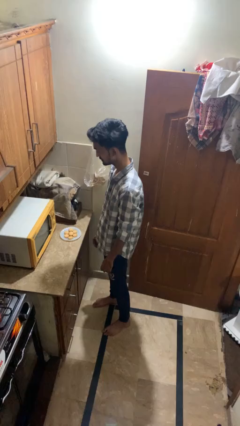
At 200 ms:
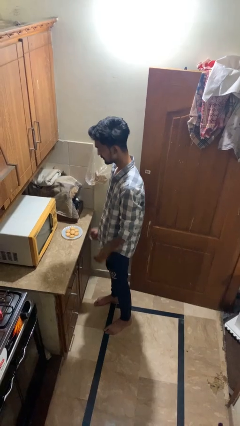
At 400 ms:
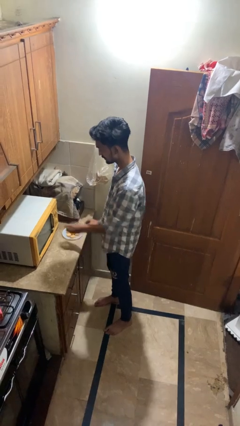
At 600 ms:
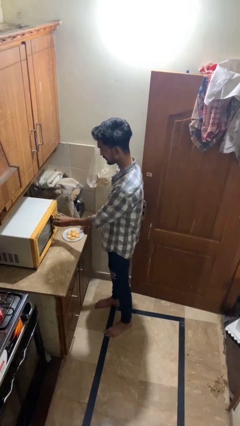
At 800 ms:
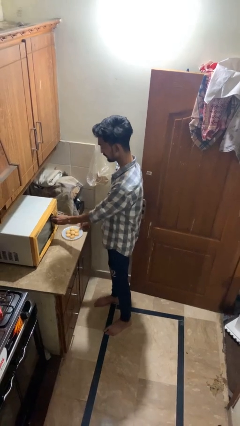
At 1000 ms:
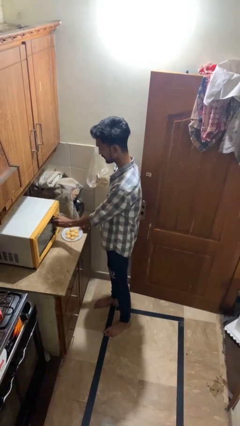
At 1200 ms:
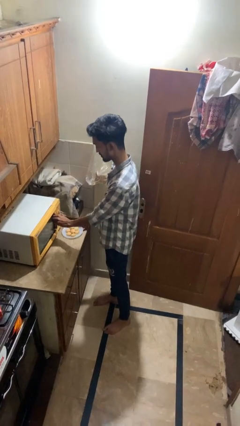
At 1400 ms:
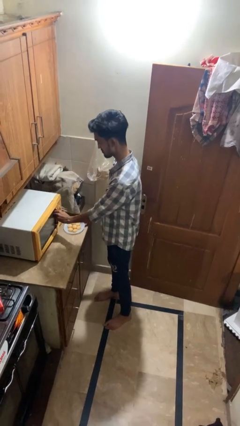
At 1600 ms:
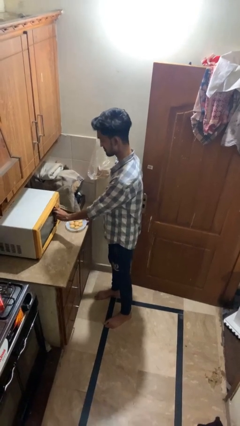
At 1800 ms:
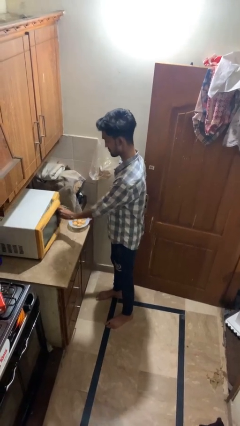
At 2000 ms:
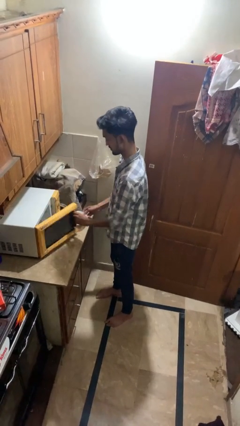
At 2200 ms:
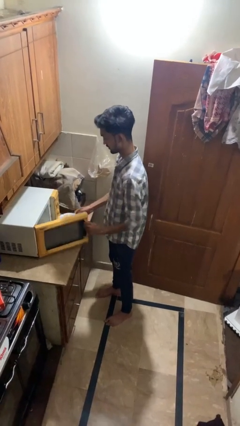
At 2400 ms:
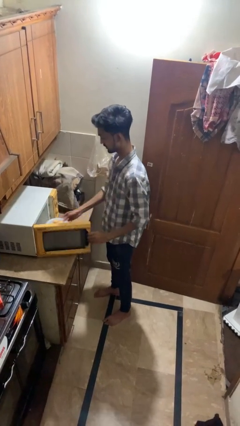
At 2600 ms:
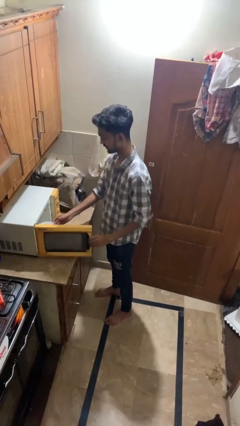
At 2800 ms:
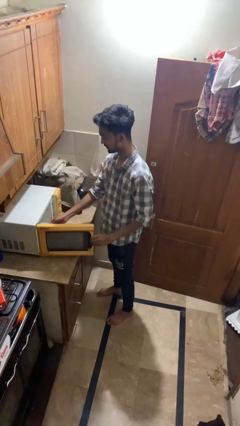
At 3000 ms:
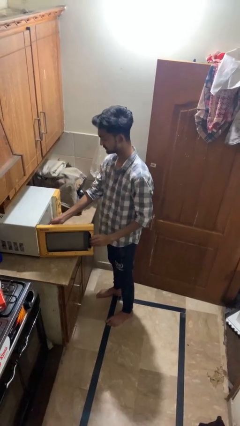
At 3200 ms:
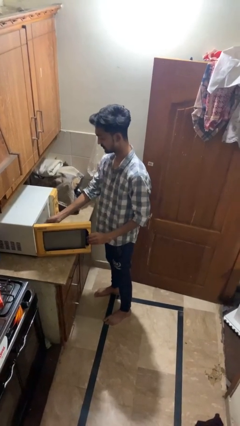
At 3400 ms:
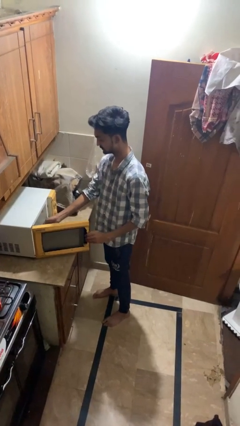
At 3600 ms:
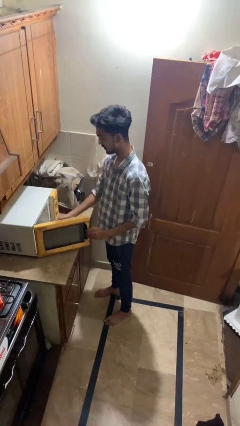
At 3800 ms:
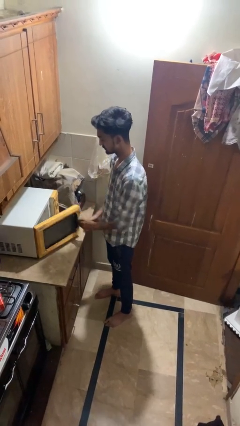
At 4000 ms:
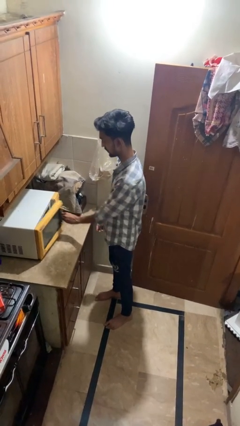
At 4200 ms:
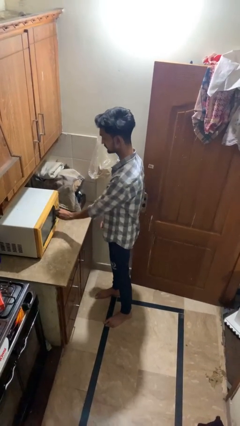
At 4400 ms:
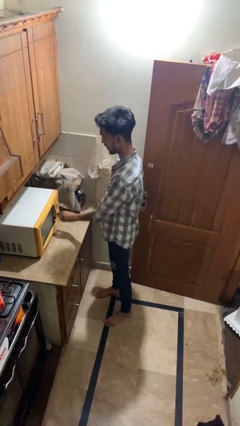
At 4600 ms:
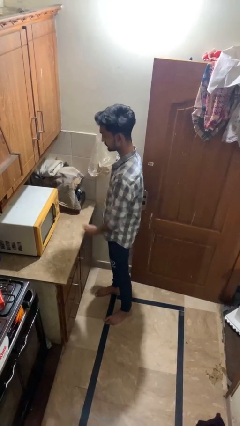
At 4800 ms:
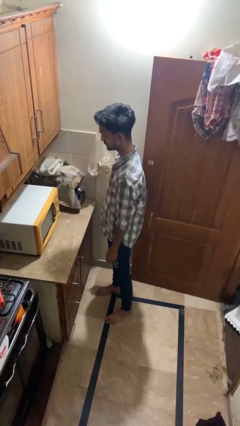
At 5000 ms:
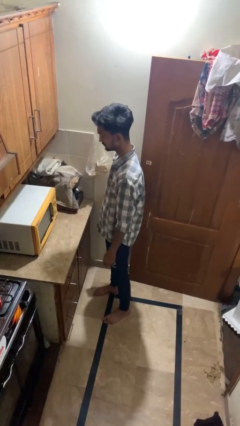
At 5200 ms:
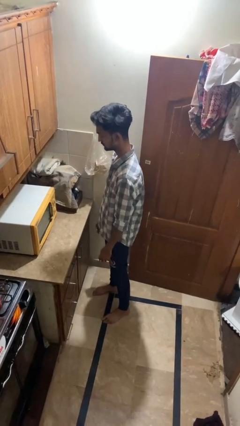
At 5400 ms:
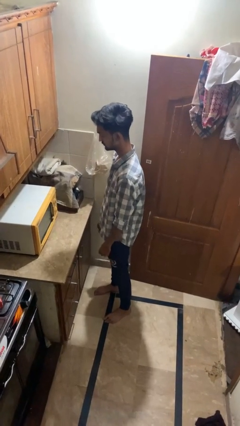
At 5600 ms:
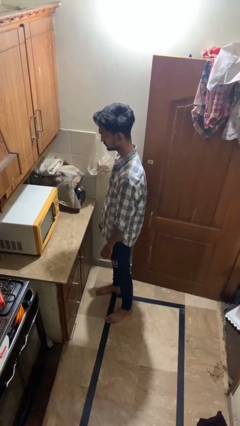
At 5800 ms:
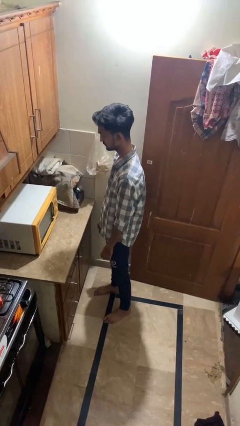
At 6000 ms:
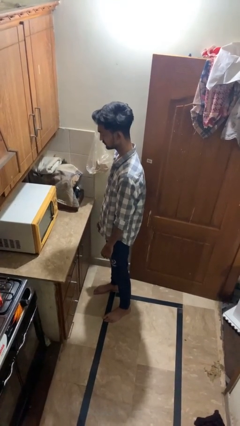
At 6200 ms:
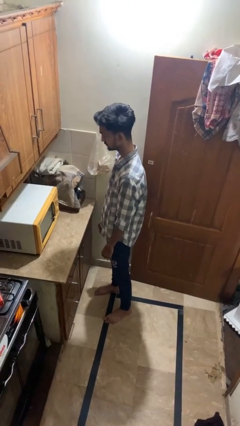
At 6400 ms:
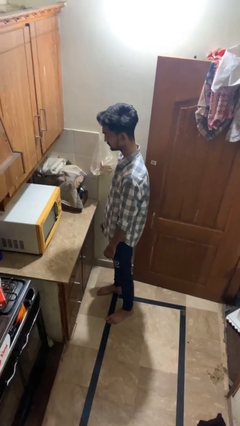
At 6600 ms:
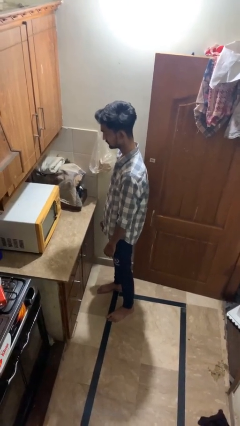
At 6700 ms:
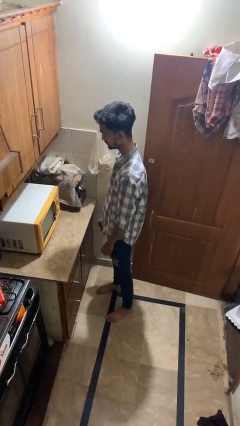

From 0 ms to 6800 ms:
person puts object into microwave

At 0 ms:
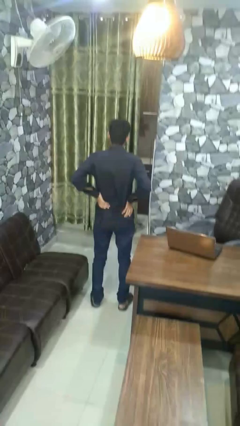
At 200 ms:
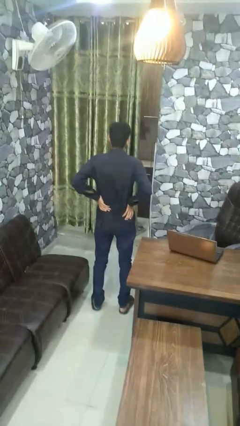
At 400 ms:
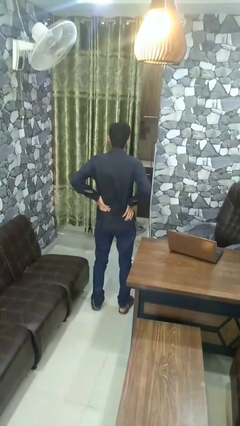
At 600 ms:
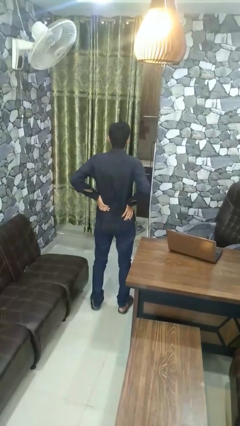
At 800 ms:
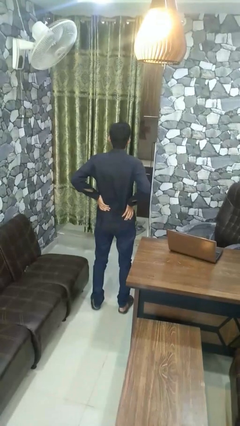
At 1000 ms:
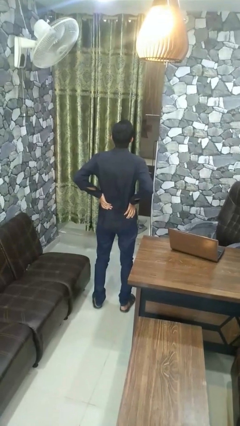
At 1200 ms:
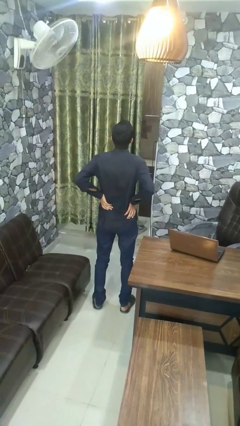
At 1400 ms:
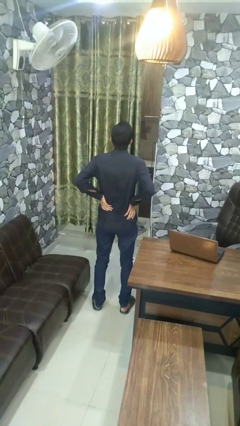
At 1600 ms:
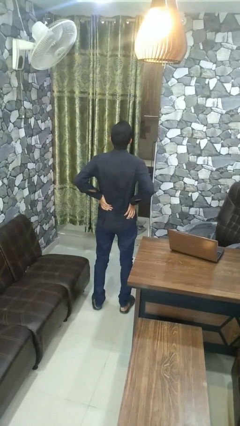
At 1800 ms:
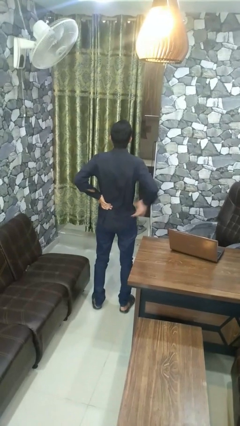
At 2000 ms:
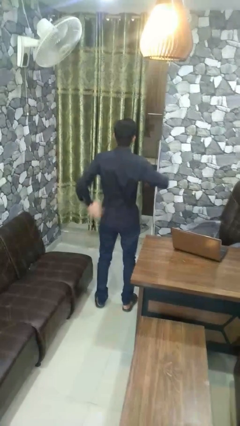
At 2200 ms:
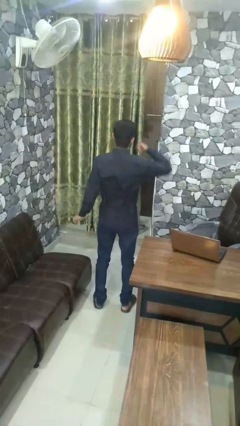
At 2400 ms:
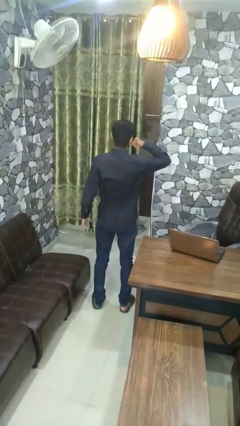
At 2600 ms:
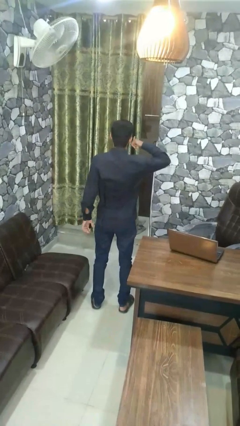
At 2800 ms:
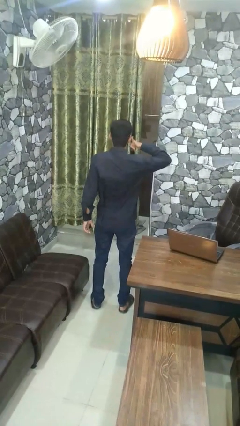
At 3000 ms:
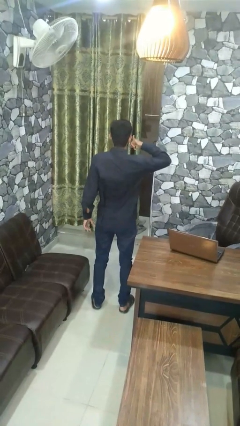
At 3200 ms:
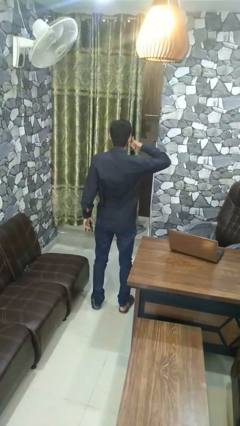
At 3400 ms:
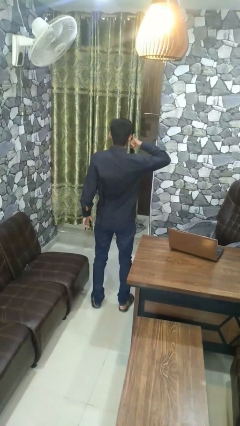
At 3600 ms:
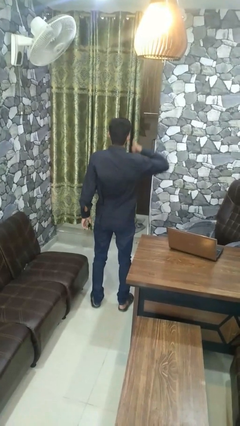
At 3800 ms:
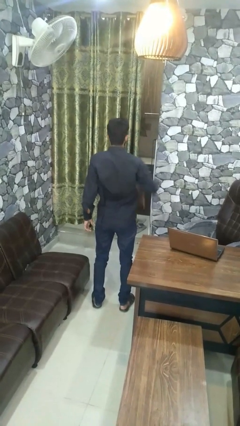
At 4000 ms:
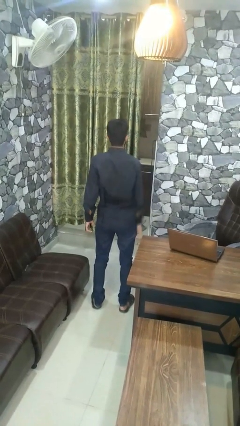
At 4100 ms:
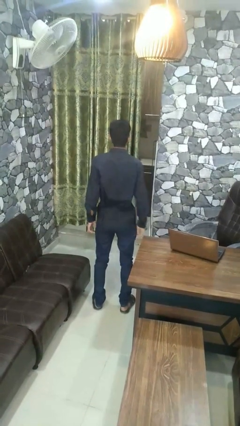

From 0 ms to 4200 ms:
person gestures call me

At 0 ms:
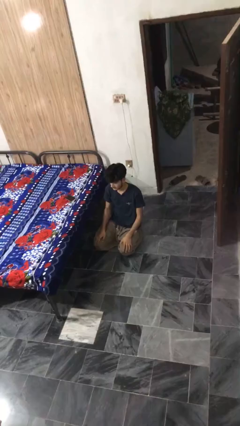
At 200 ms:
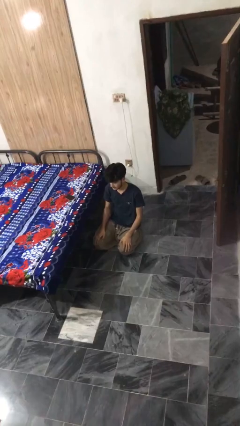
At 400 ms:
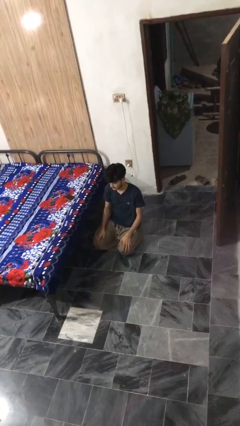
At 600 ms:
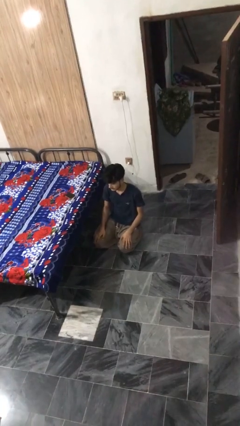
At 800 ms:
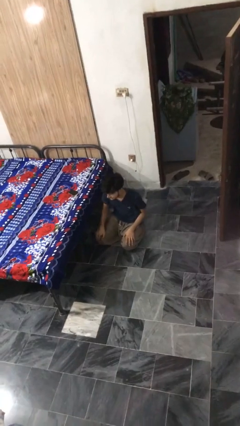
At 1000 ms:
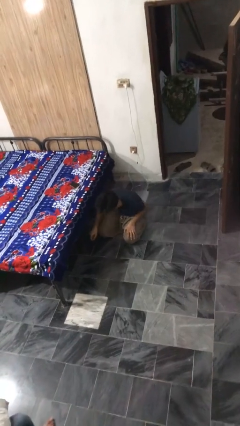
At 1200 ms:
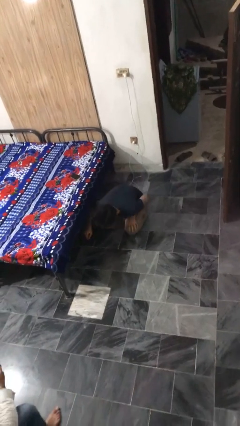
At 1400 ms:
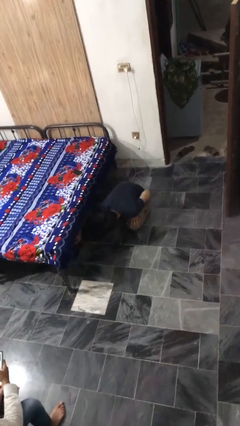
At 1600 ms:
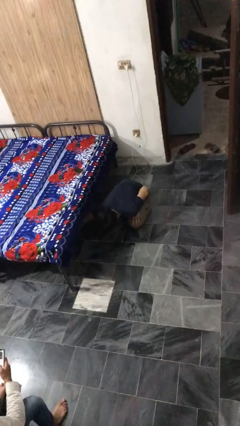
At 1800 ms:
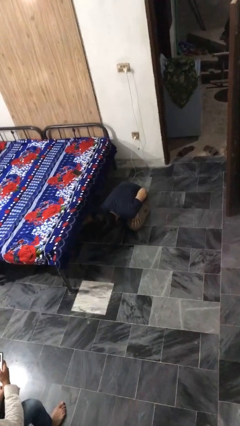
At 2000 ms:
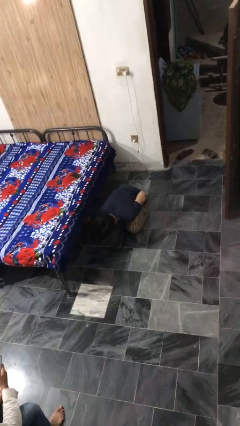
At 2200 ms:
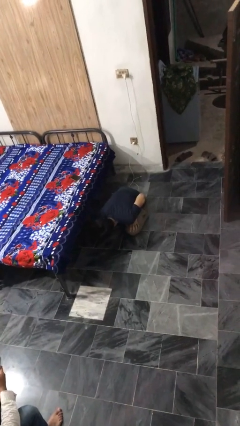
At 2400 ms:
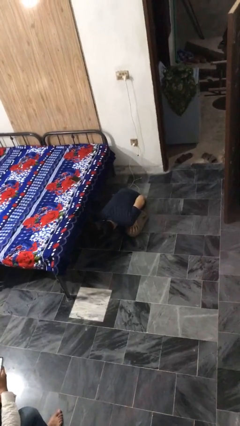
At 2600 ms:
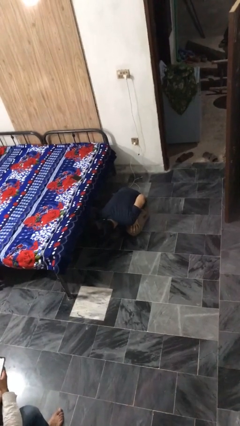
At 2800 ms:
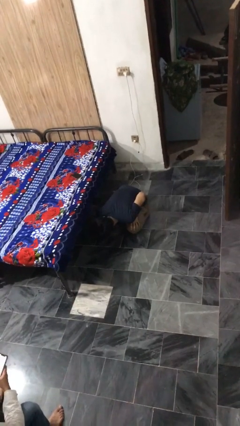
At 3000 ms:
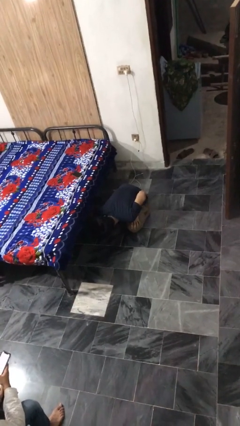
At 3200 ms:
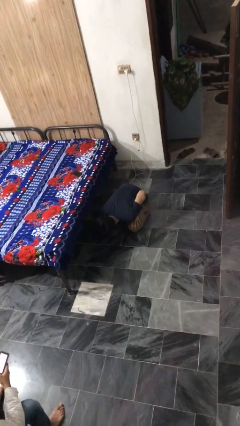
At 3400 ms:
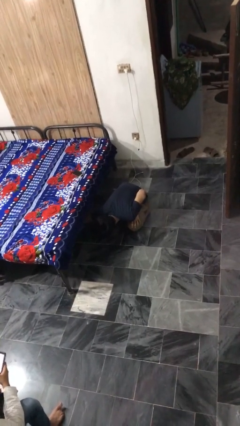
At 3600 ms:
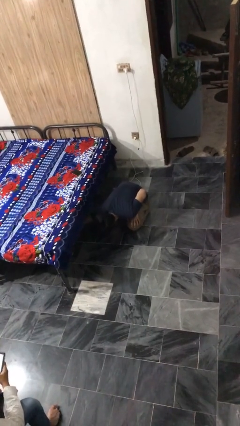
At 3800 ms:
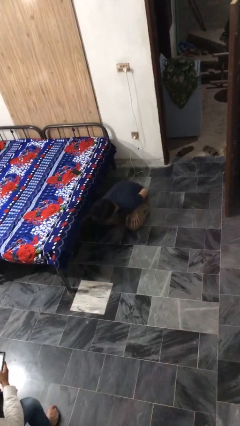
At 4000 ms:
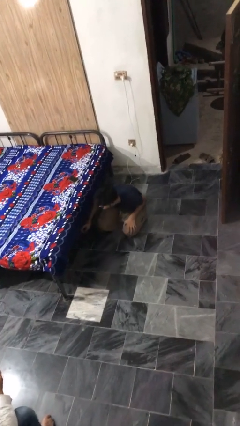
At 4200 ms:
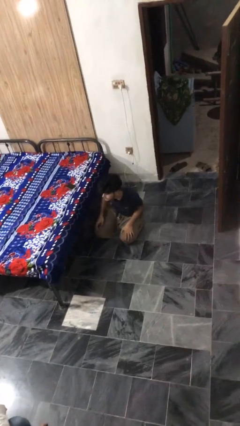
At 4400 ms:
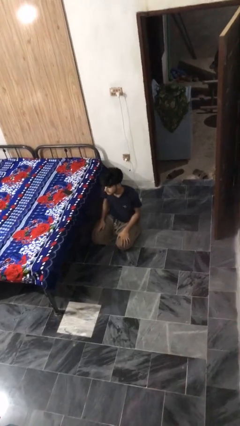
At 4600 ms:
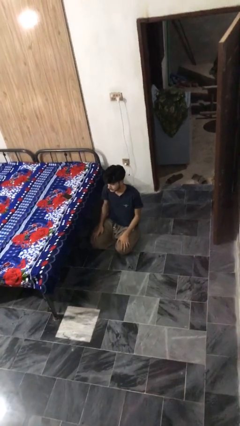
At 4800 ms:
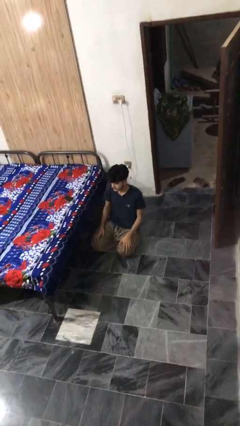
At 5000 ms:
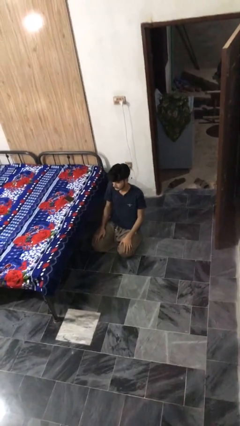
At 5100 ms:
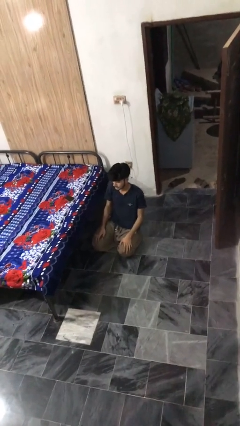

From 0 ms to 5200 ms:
person searches under bed

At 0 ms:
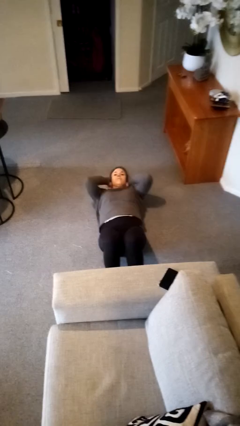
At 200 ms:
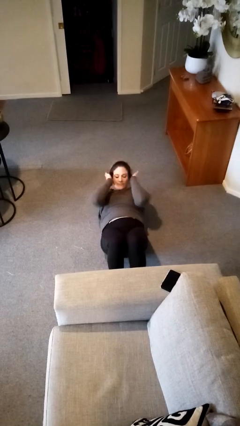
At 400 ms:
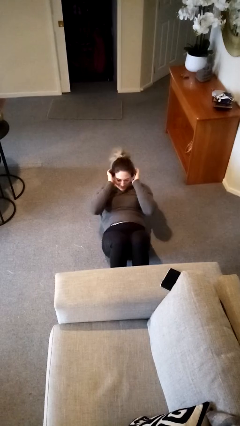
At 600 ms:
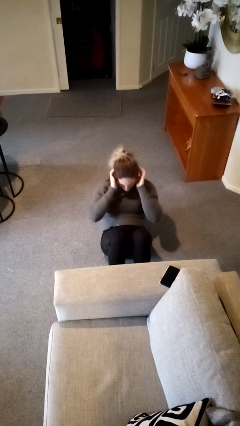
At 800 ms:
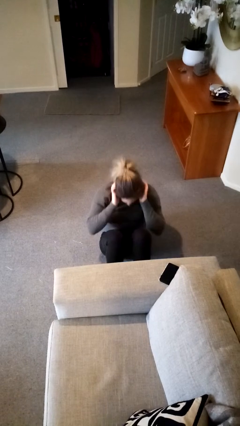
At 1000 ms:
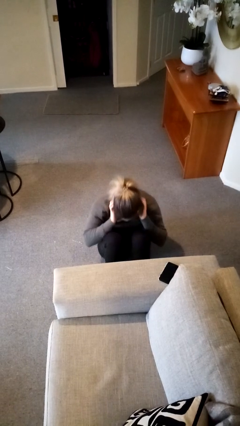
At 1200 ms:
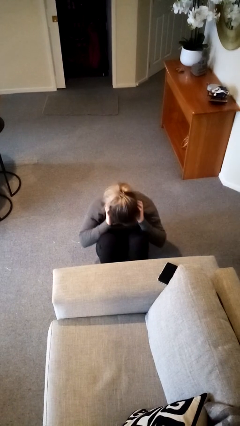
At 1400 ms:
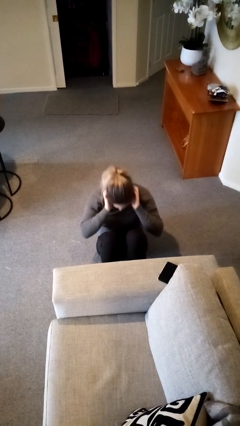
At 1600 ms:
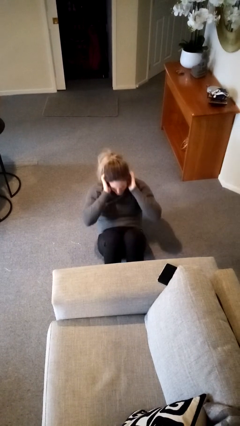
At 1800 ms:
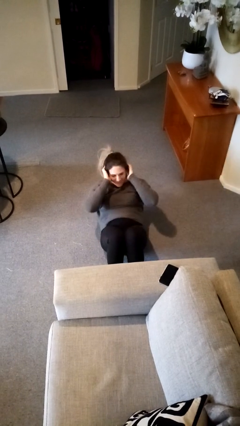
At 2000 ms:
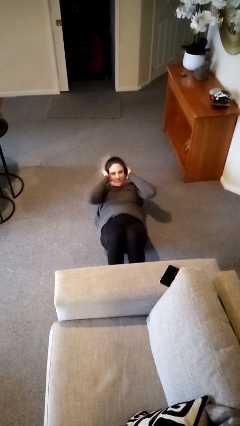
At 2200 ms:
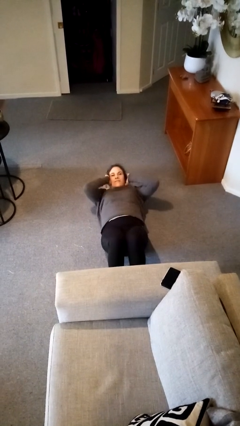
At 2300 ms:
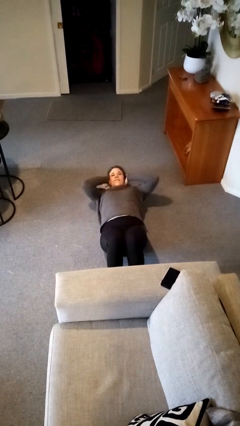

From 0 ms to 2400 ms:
person exercises with situp
